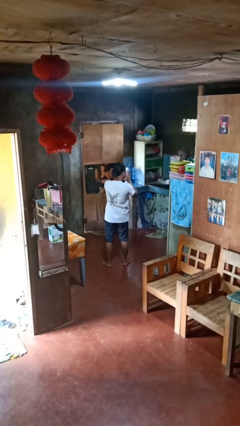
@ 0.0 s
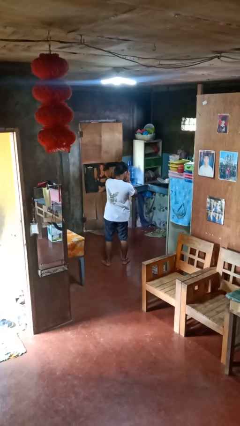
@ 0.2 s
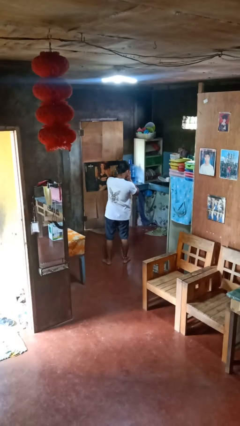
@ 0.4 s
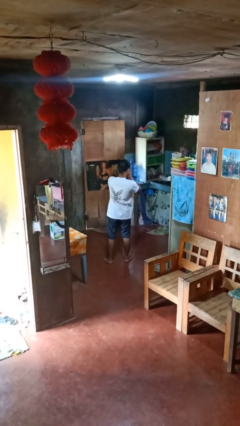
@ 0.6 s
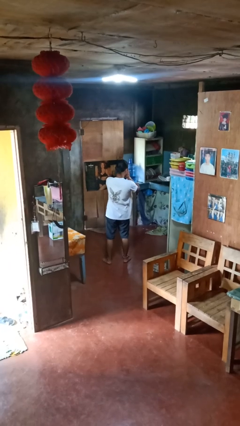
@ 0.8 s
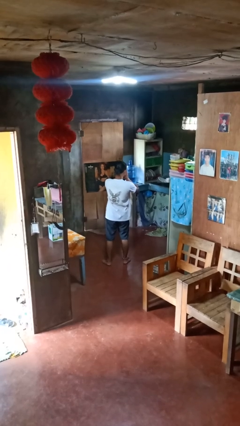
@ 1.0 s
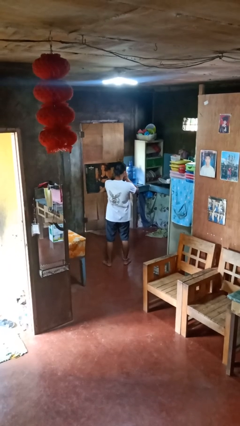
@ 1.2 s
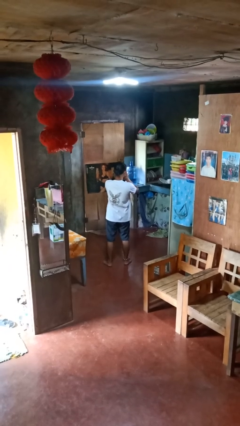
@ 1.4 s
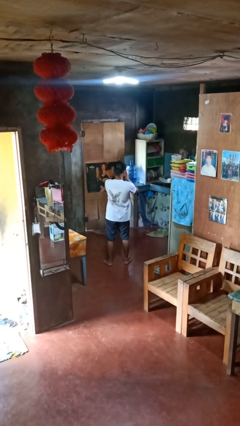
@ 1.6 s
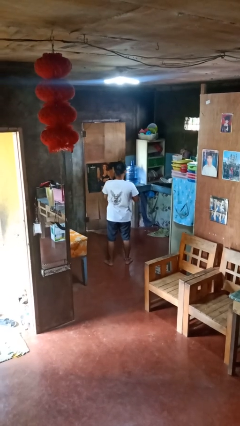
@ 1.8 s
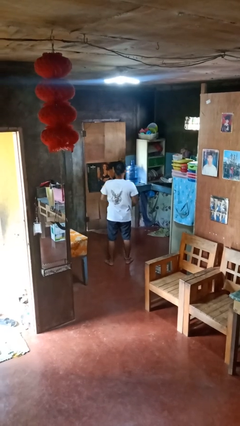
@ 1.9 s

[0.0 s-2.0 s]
person sneezes into hand

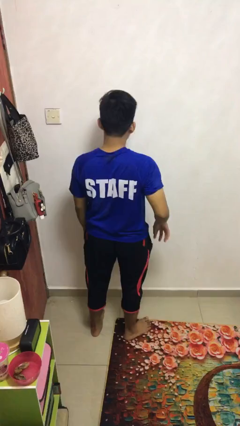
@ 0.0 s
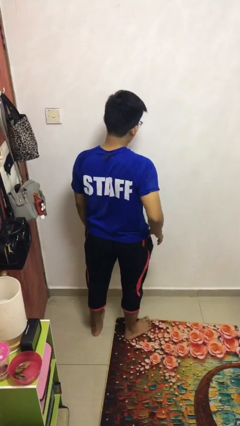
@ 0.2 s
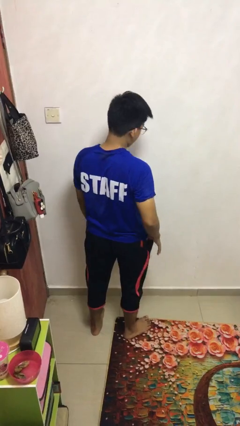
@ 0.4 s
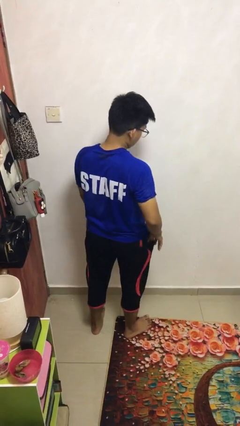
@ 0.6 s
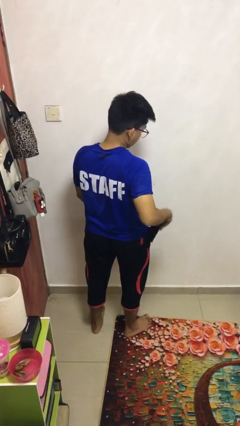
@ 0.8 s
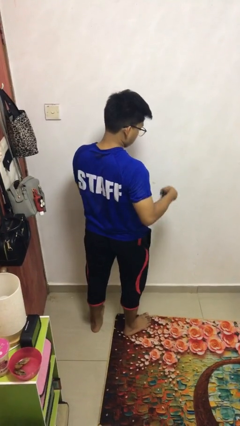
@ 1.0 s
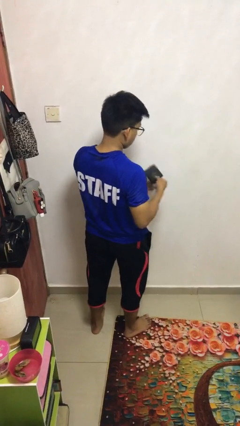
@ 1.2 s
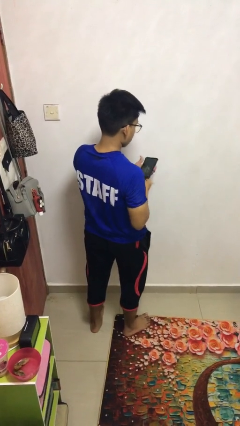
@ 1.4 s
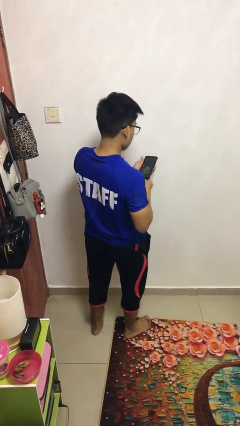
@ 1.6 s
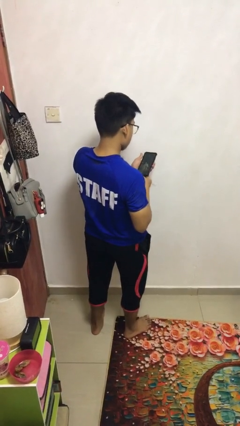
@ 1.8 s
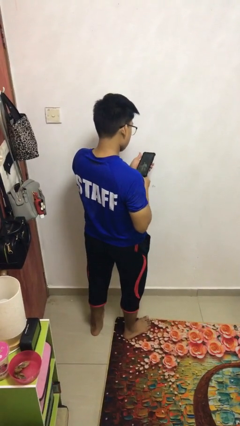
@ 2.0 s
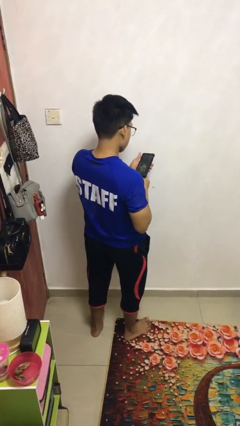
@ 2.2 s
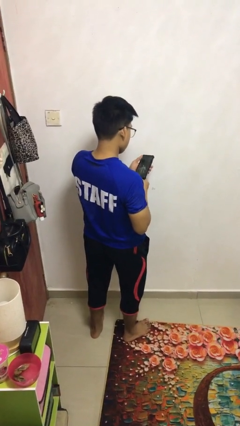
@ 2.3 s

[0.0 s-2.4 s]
person takes phone from pocket

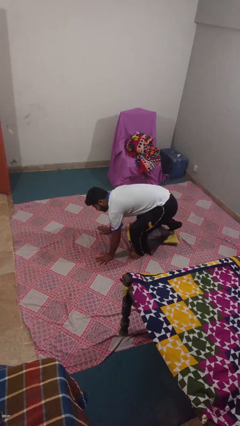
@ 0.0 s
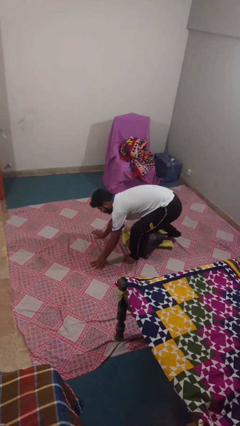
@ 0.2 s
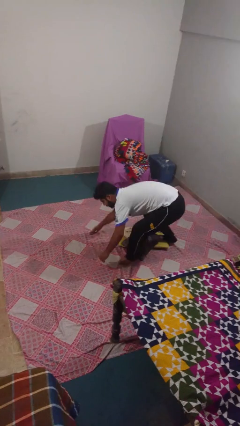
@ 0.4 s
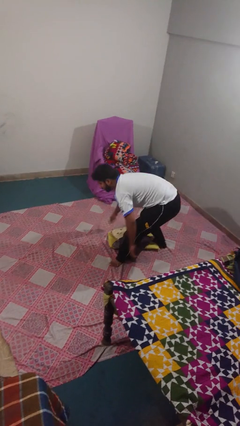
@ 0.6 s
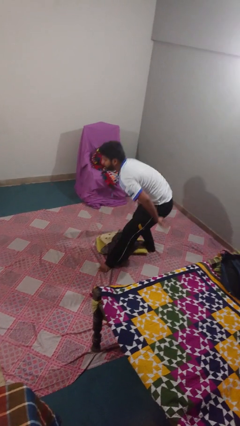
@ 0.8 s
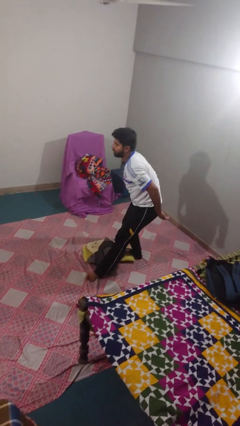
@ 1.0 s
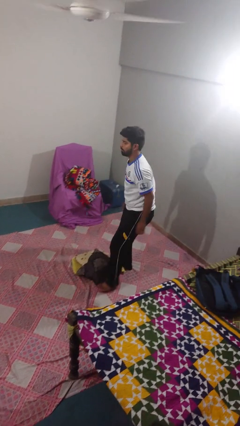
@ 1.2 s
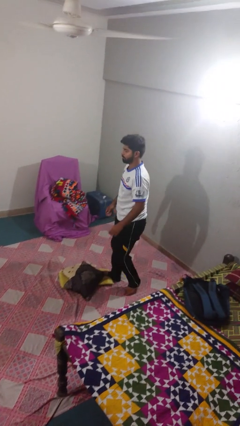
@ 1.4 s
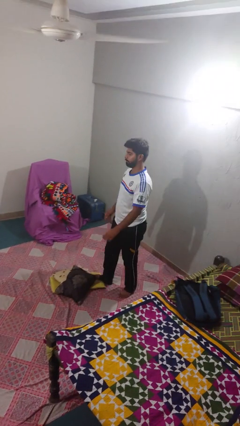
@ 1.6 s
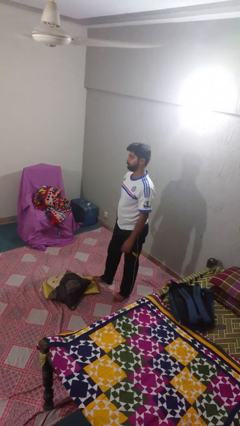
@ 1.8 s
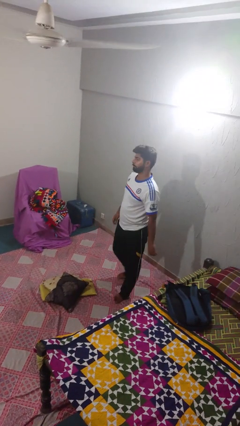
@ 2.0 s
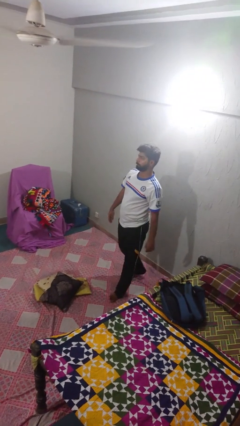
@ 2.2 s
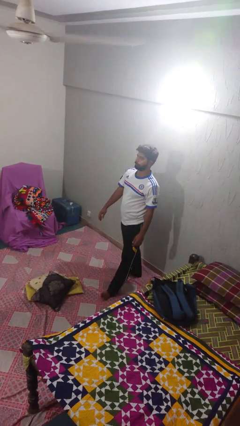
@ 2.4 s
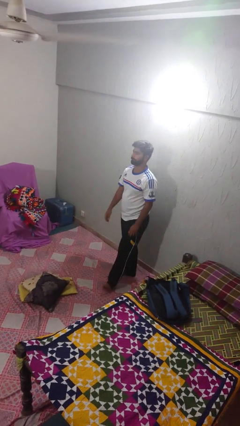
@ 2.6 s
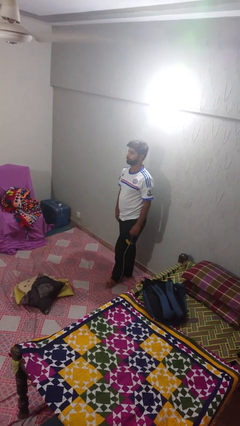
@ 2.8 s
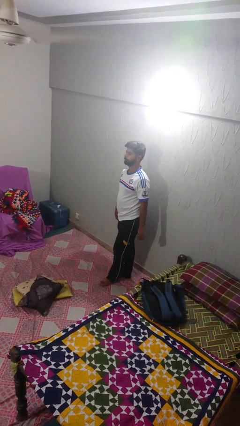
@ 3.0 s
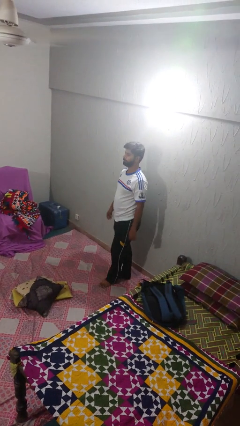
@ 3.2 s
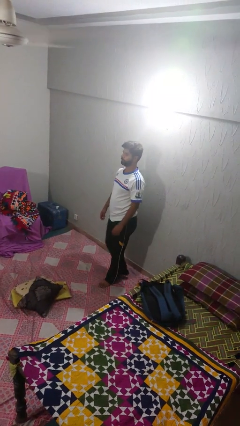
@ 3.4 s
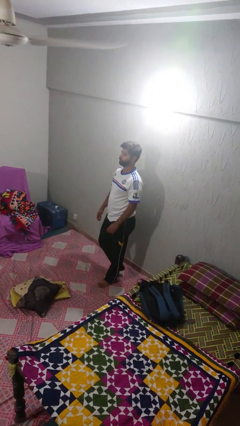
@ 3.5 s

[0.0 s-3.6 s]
person stands up from floor

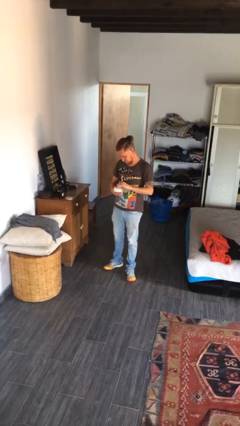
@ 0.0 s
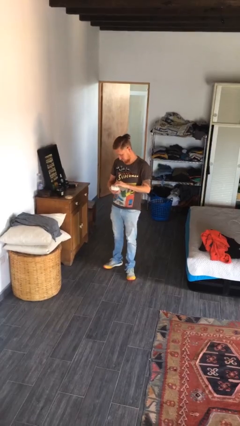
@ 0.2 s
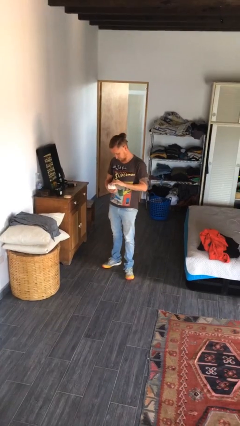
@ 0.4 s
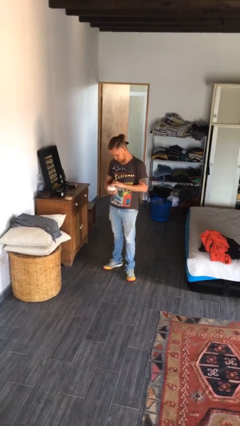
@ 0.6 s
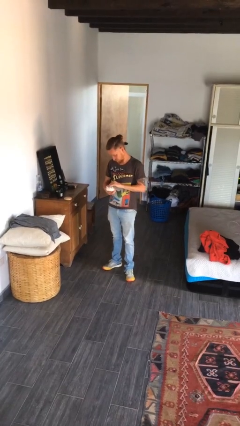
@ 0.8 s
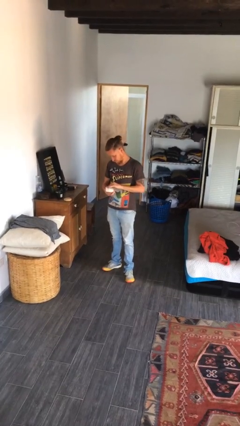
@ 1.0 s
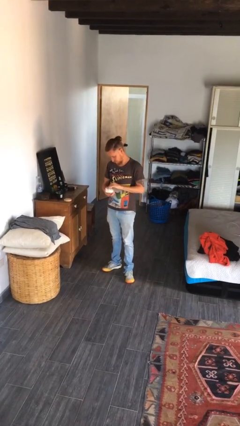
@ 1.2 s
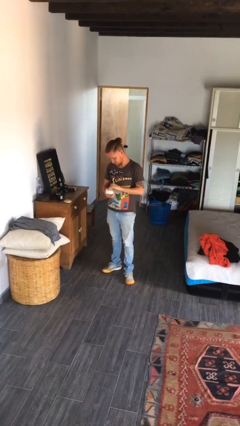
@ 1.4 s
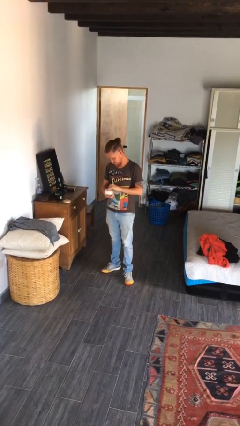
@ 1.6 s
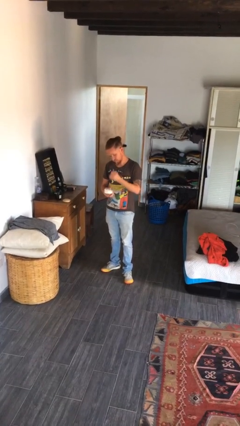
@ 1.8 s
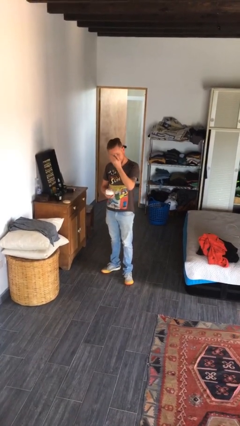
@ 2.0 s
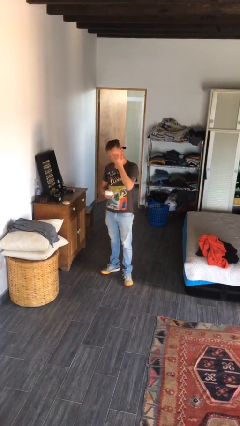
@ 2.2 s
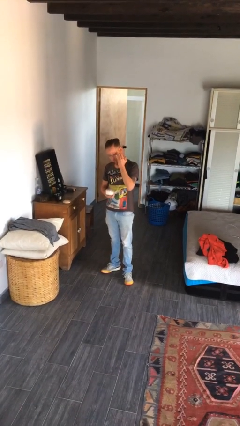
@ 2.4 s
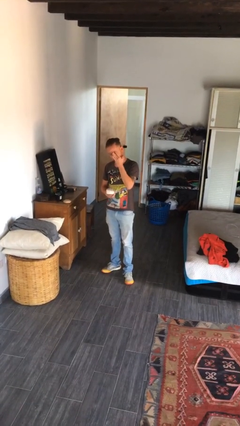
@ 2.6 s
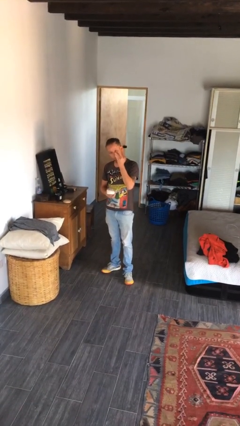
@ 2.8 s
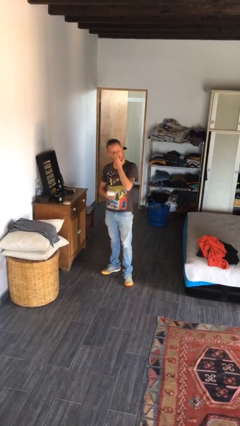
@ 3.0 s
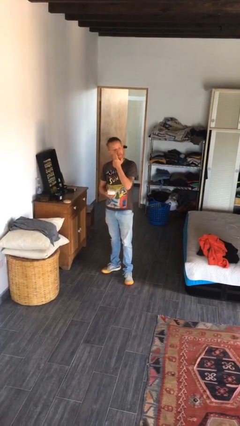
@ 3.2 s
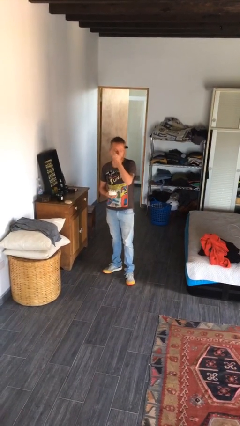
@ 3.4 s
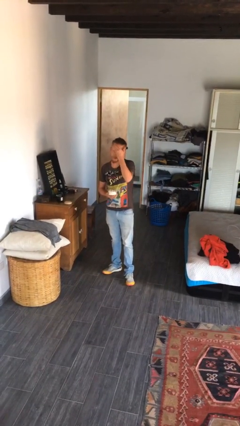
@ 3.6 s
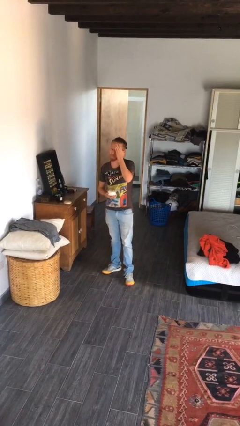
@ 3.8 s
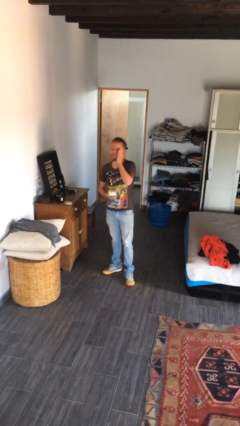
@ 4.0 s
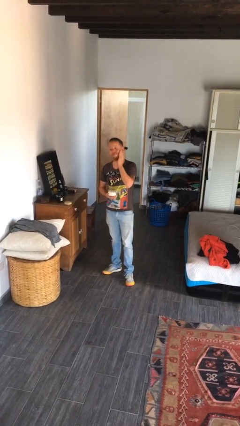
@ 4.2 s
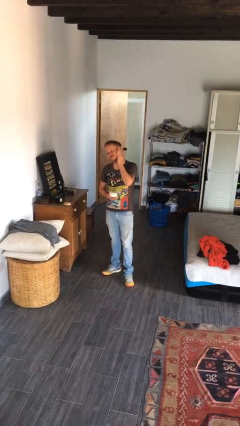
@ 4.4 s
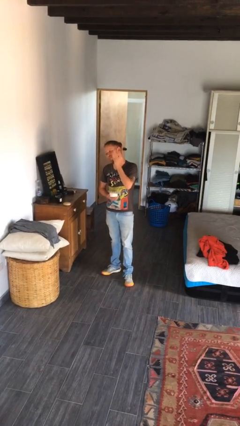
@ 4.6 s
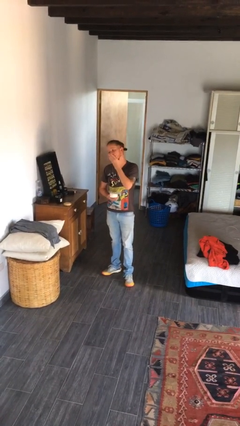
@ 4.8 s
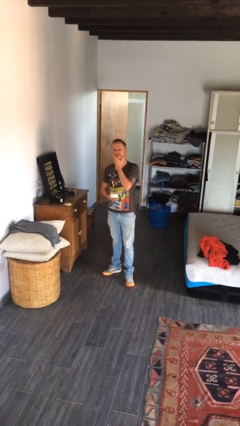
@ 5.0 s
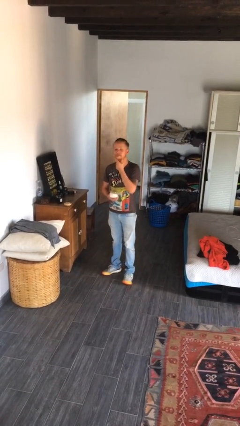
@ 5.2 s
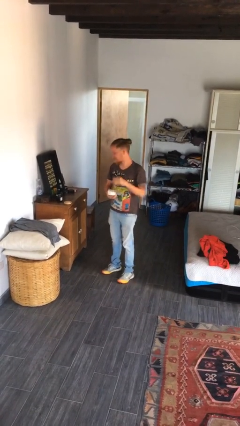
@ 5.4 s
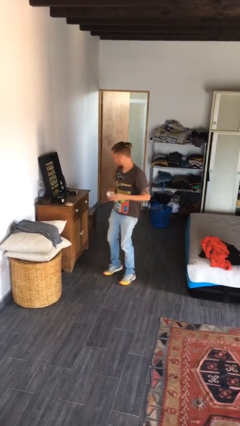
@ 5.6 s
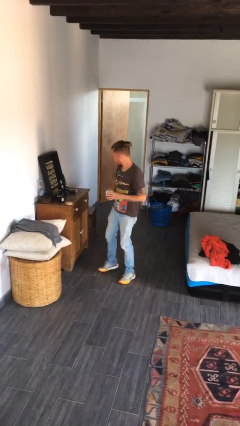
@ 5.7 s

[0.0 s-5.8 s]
person applies facial moisturizer

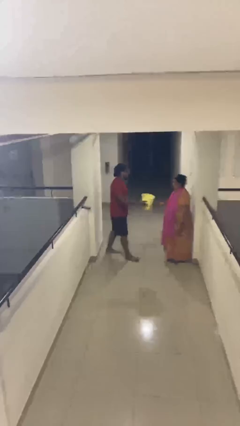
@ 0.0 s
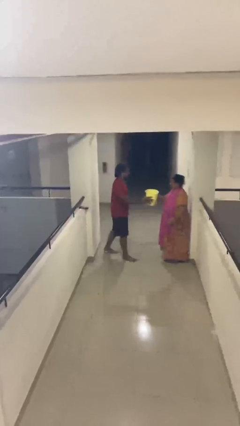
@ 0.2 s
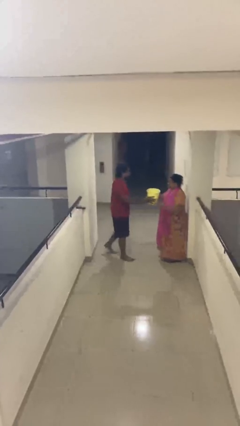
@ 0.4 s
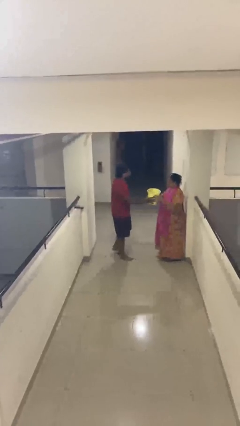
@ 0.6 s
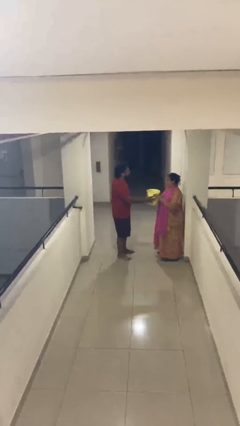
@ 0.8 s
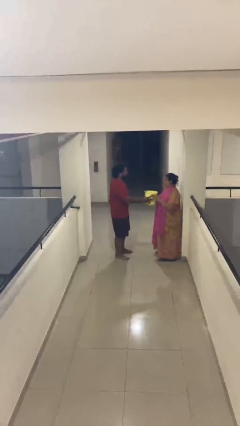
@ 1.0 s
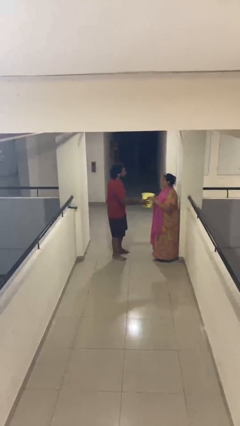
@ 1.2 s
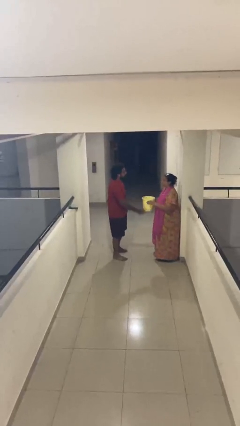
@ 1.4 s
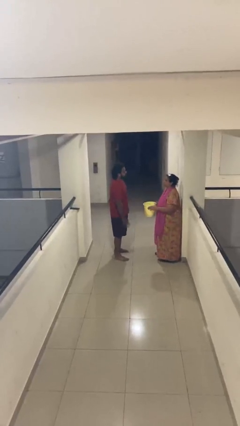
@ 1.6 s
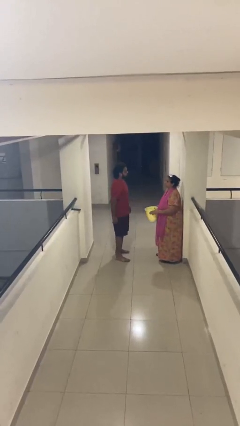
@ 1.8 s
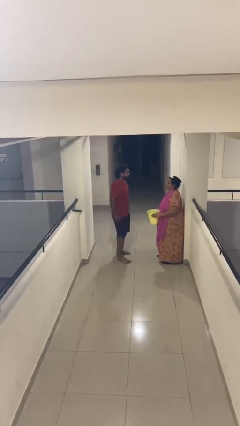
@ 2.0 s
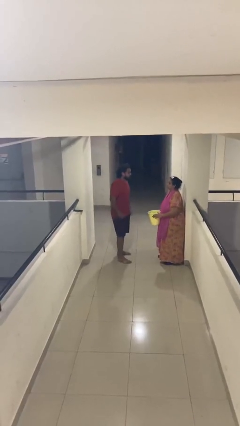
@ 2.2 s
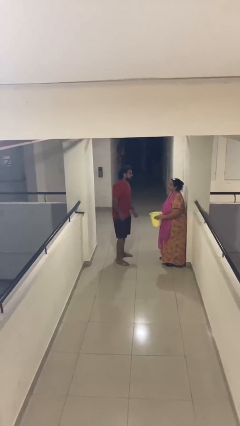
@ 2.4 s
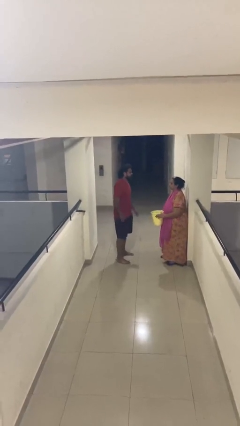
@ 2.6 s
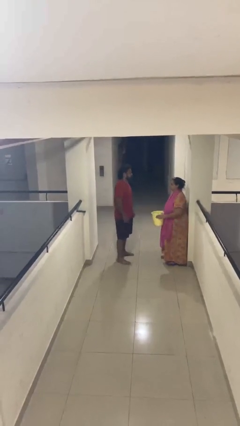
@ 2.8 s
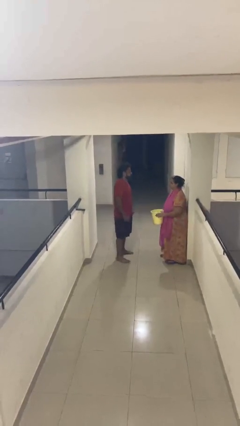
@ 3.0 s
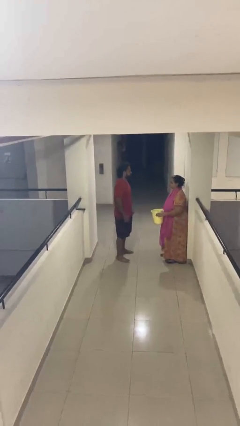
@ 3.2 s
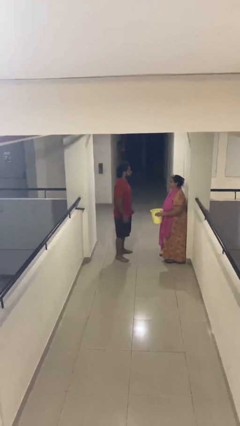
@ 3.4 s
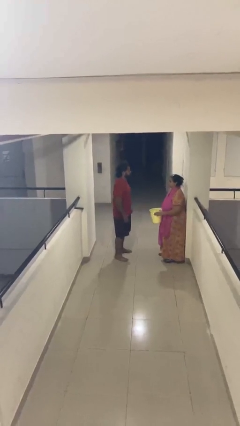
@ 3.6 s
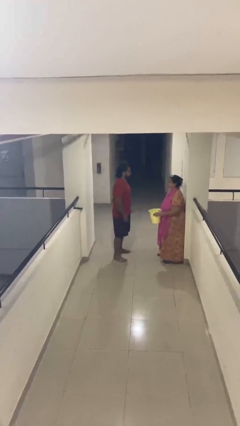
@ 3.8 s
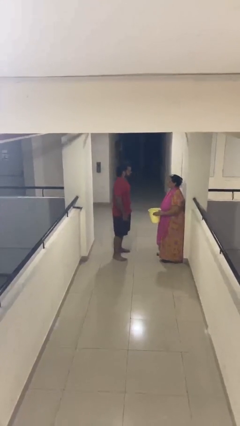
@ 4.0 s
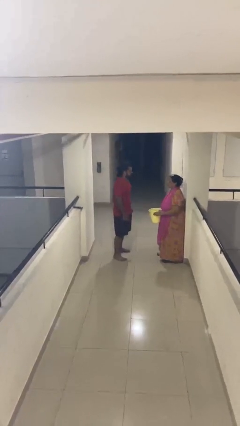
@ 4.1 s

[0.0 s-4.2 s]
person transfers object to person
